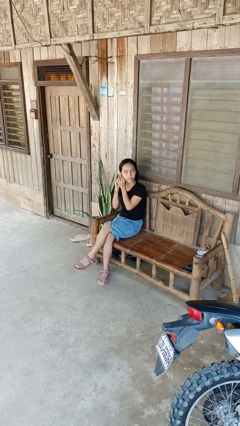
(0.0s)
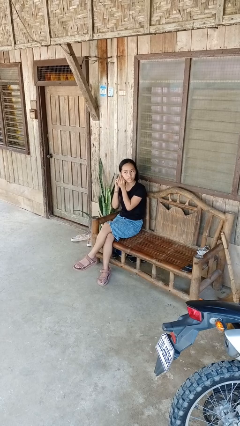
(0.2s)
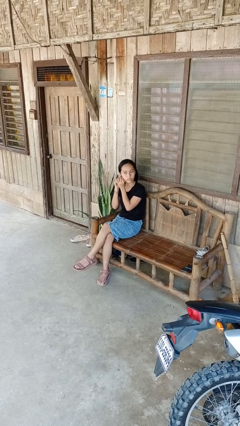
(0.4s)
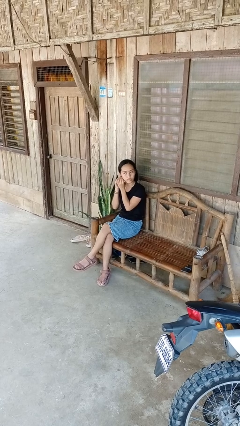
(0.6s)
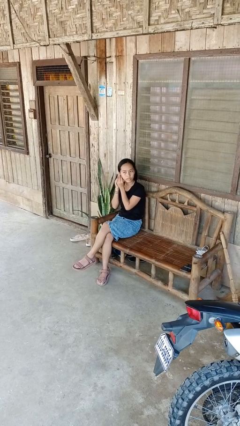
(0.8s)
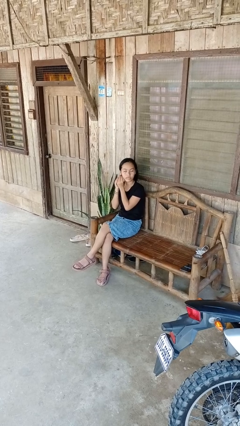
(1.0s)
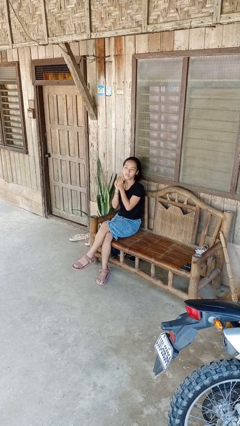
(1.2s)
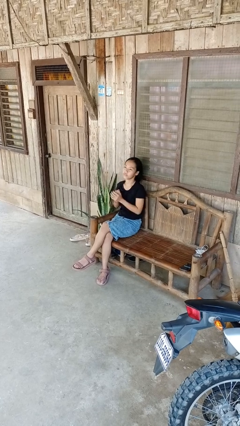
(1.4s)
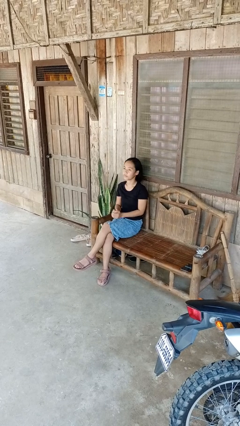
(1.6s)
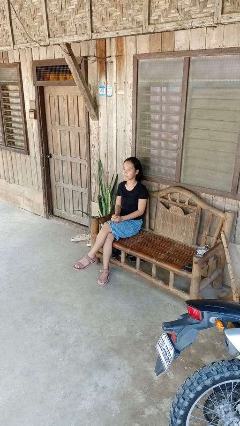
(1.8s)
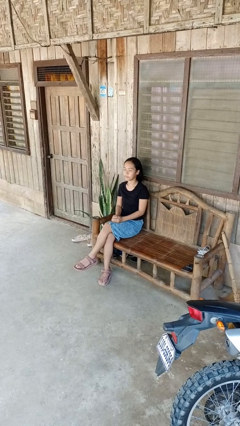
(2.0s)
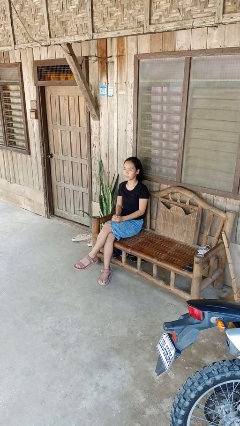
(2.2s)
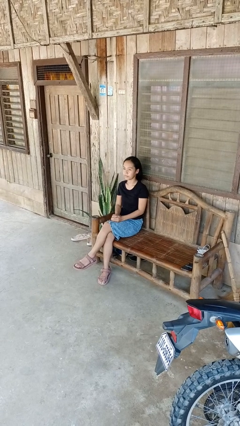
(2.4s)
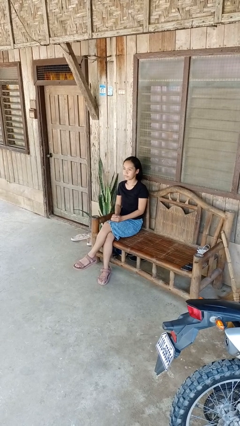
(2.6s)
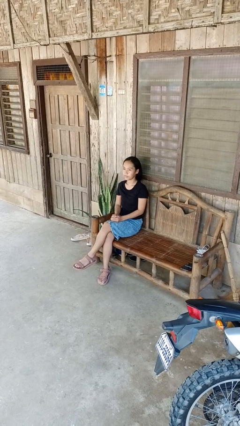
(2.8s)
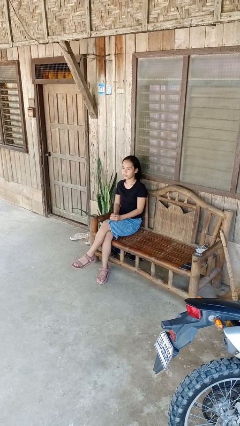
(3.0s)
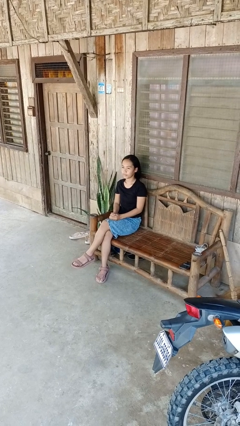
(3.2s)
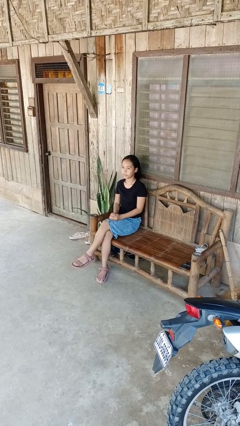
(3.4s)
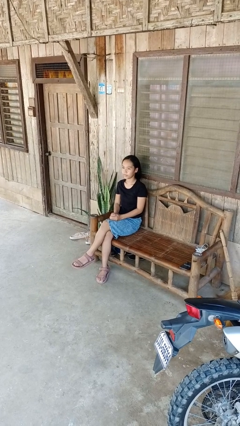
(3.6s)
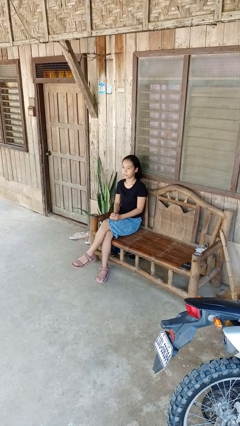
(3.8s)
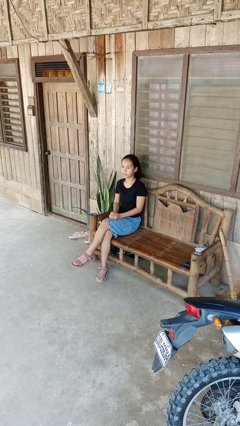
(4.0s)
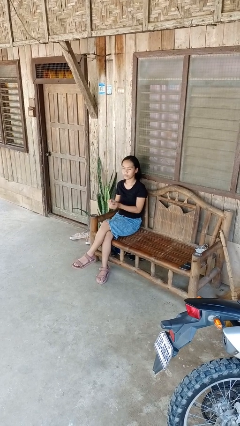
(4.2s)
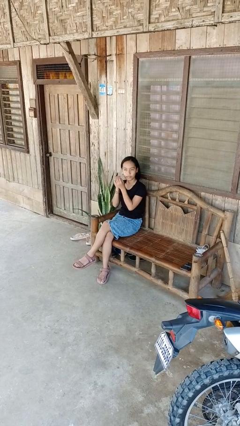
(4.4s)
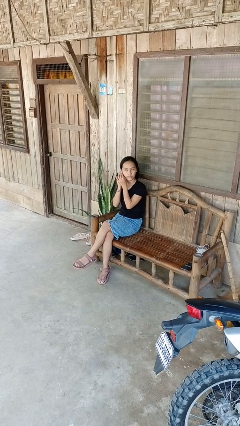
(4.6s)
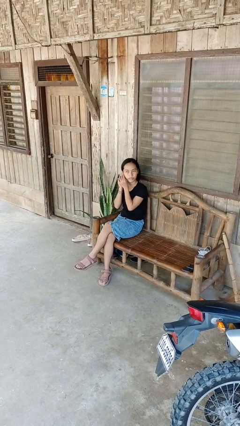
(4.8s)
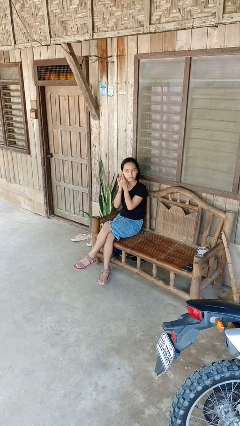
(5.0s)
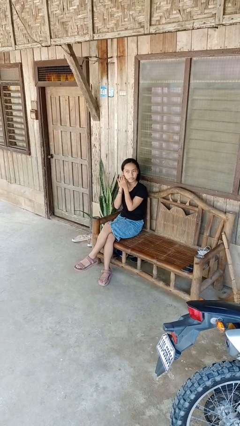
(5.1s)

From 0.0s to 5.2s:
person puts on earrings

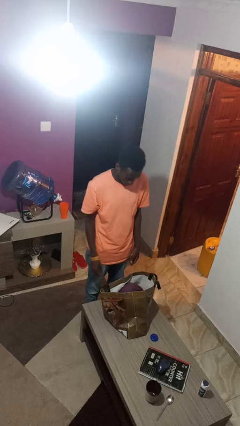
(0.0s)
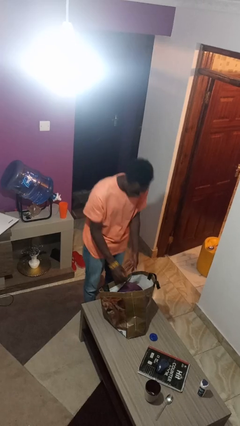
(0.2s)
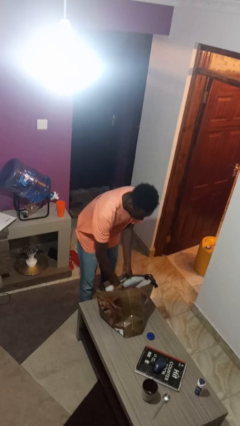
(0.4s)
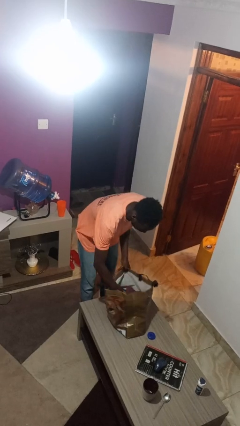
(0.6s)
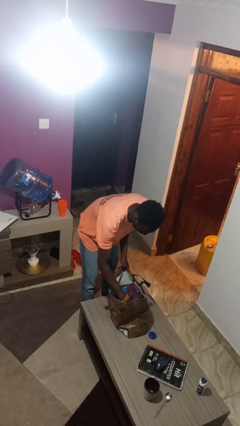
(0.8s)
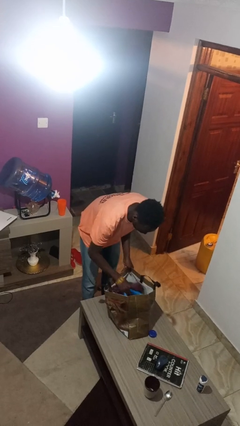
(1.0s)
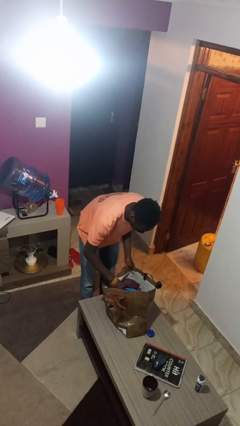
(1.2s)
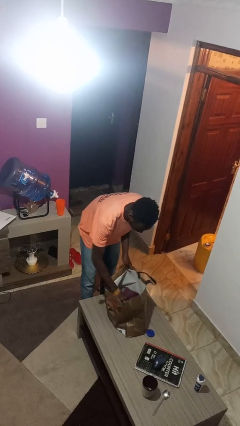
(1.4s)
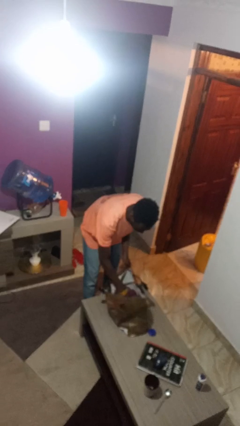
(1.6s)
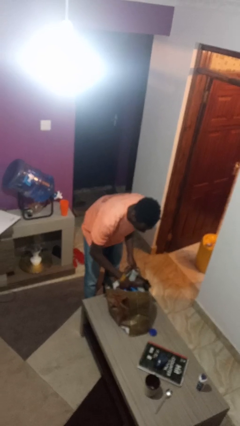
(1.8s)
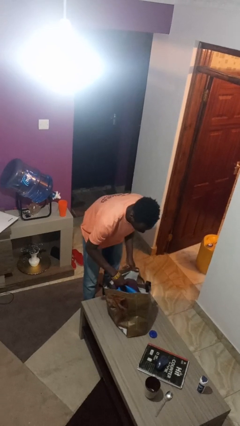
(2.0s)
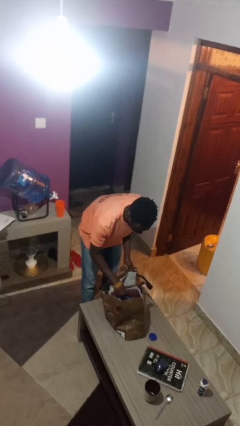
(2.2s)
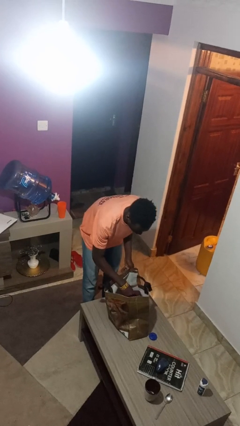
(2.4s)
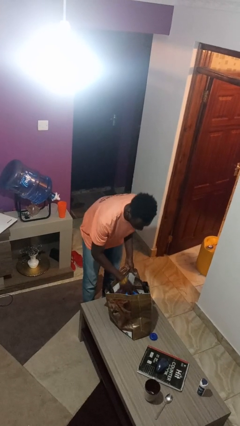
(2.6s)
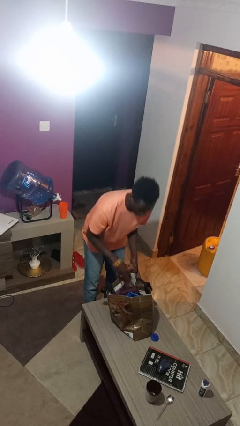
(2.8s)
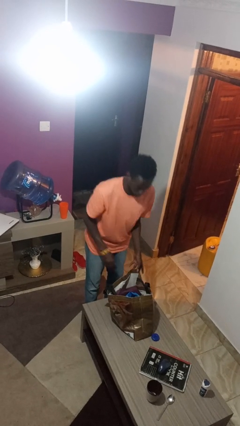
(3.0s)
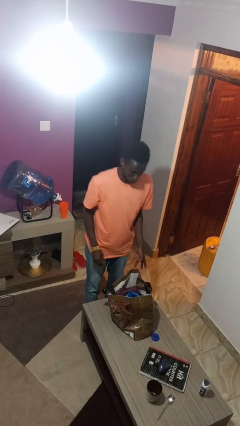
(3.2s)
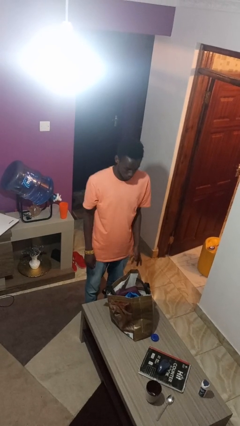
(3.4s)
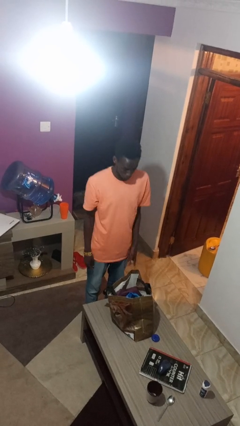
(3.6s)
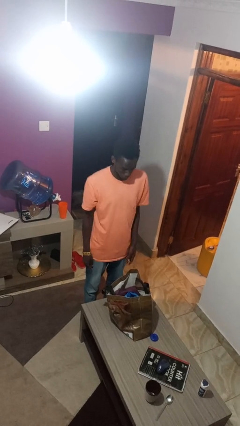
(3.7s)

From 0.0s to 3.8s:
person searches in bag

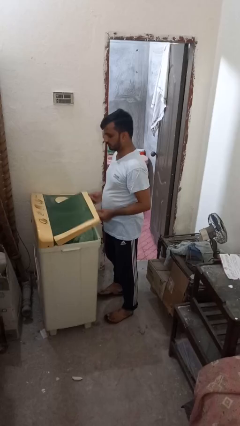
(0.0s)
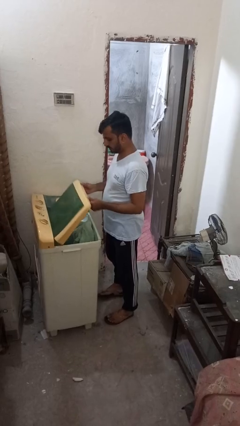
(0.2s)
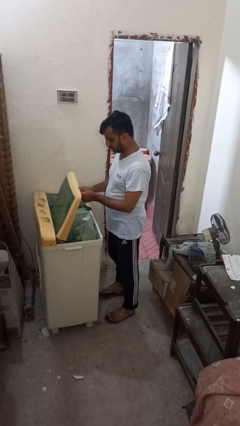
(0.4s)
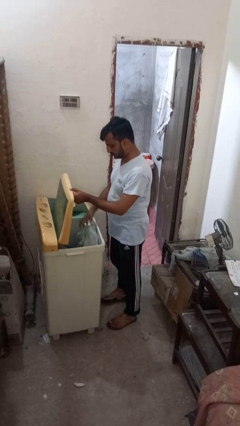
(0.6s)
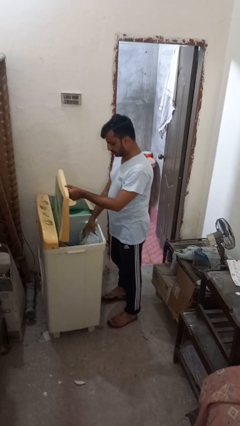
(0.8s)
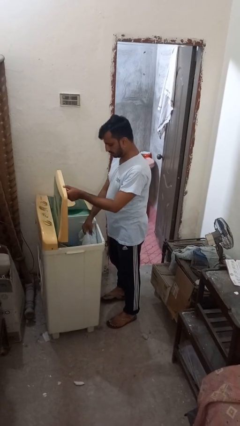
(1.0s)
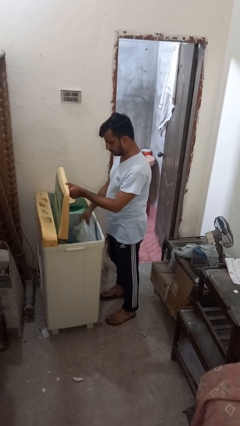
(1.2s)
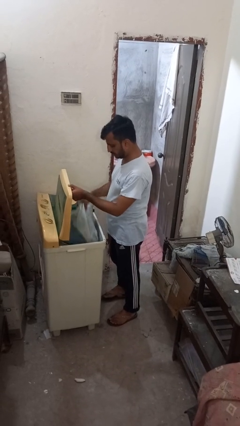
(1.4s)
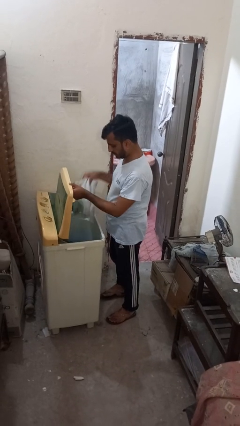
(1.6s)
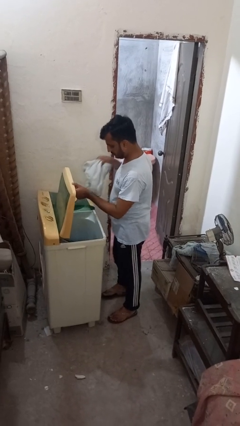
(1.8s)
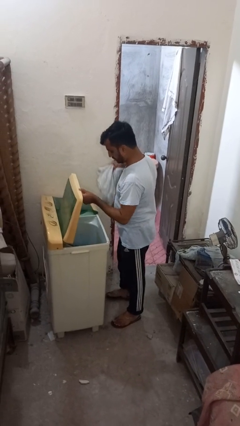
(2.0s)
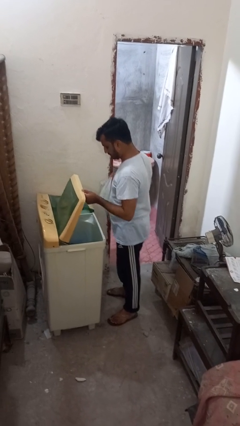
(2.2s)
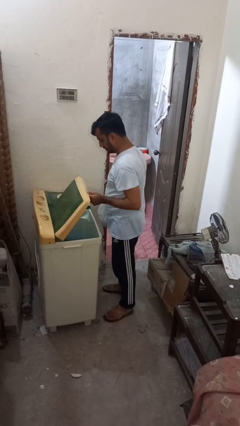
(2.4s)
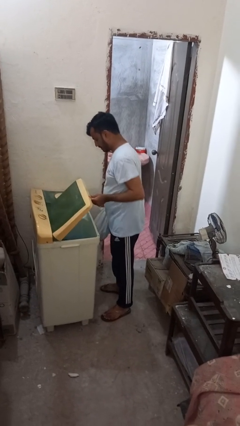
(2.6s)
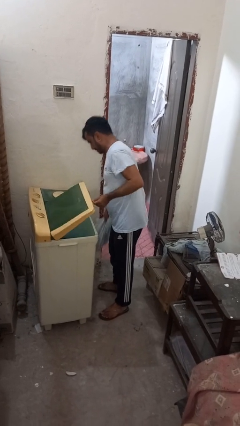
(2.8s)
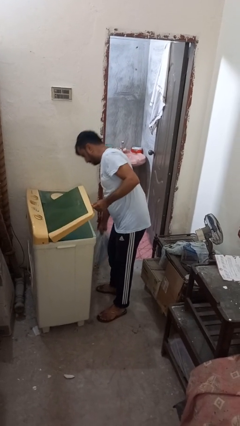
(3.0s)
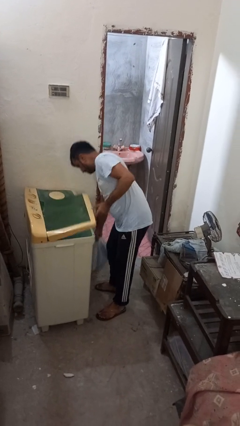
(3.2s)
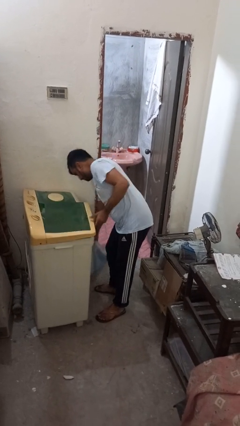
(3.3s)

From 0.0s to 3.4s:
person unloads clotheswasher

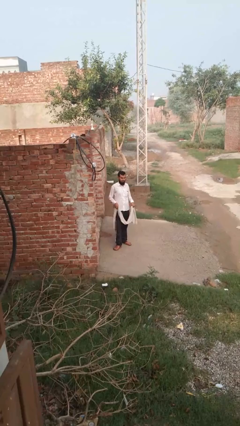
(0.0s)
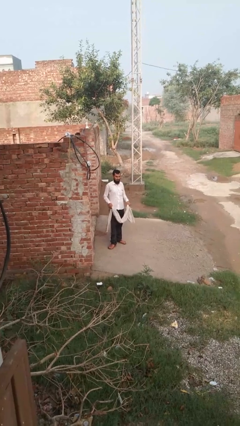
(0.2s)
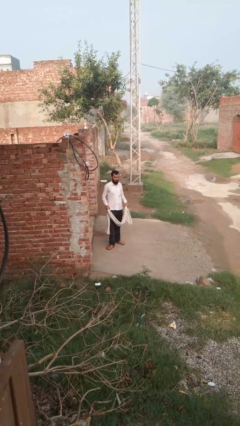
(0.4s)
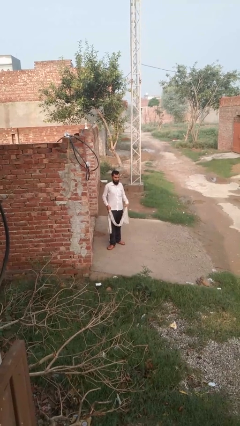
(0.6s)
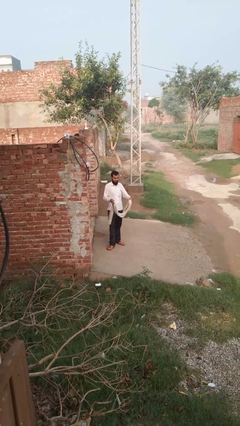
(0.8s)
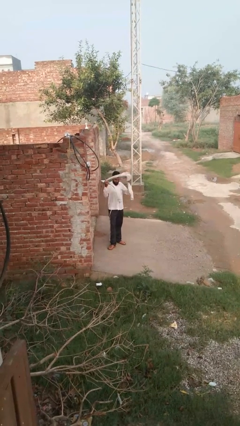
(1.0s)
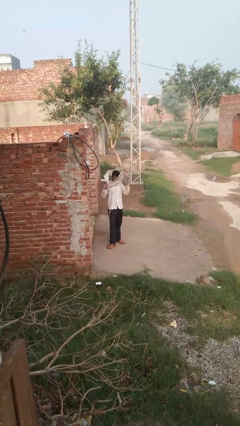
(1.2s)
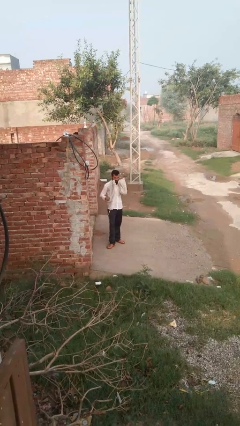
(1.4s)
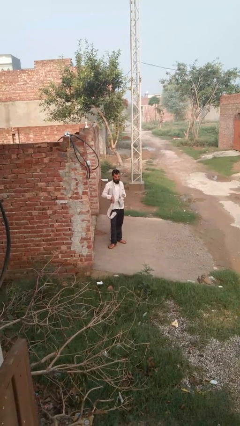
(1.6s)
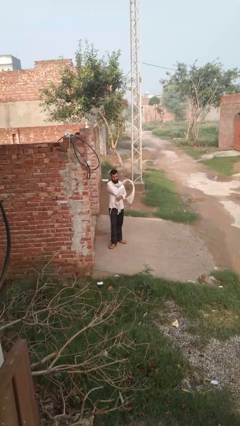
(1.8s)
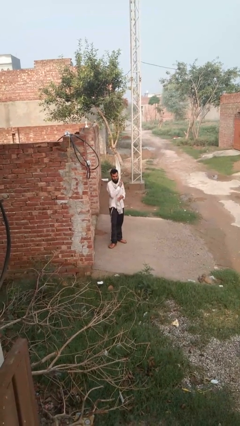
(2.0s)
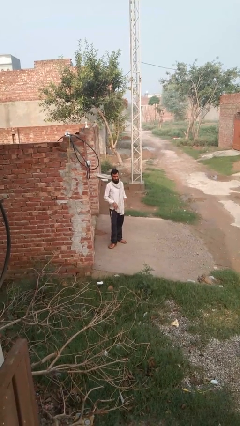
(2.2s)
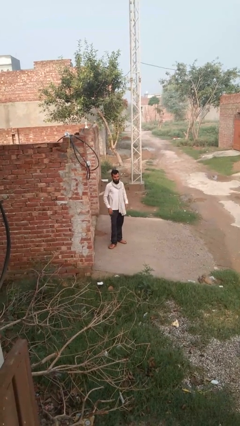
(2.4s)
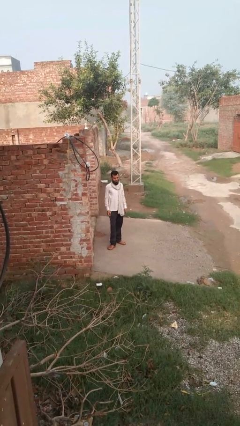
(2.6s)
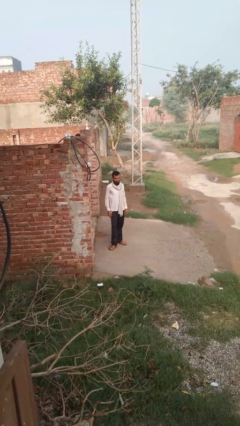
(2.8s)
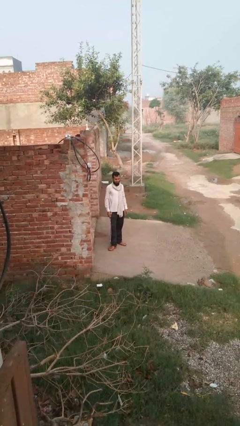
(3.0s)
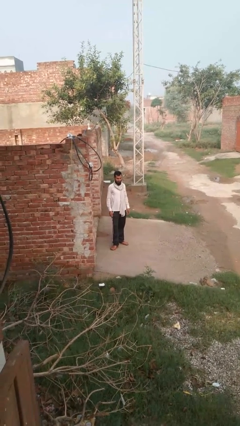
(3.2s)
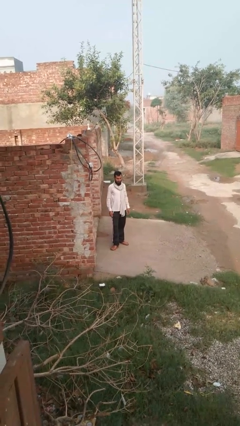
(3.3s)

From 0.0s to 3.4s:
person puts on scarf

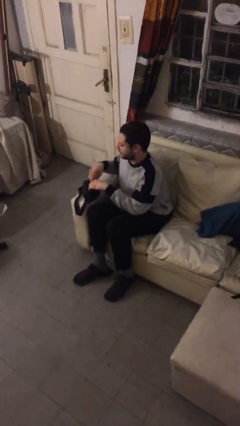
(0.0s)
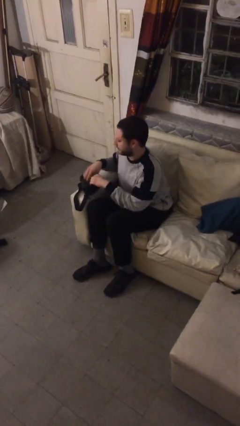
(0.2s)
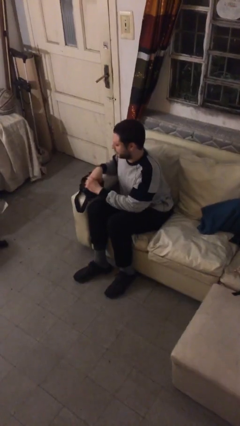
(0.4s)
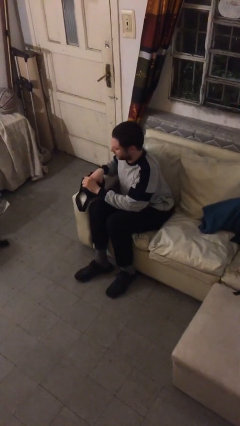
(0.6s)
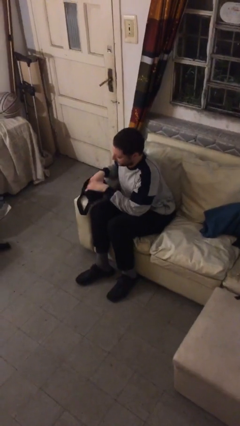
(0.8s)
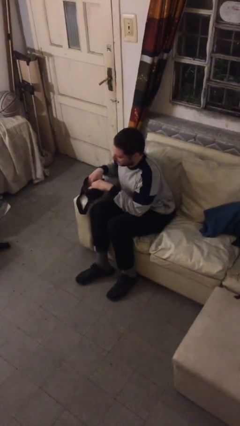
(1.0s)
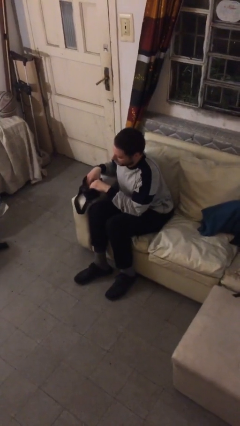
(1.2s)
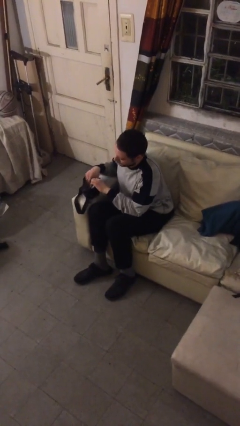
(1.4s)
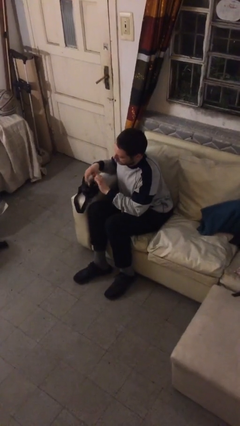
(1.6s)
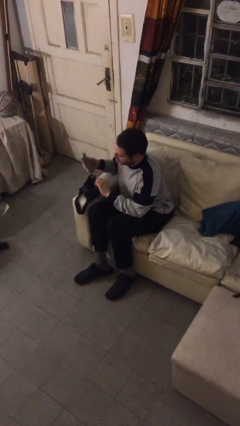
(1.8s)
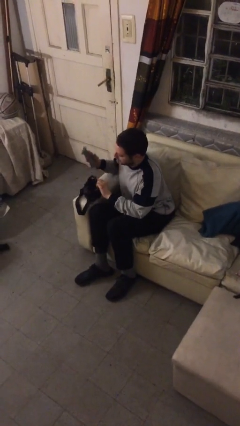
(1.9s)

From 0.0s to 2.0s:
person searches in purse

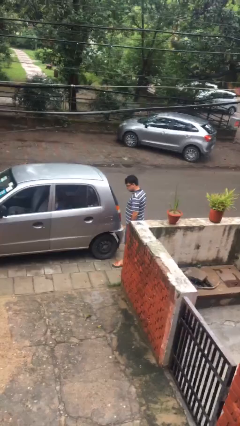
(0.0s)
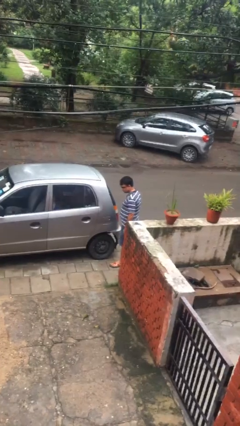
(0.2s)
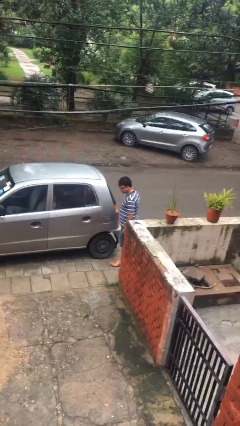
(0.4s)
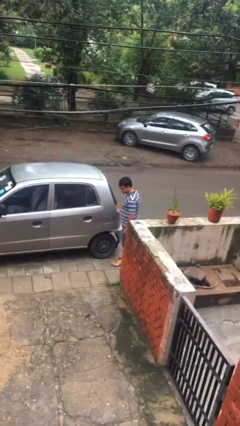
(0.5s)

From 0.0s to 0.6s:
person walks around car
